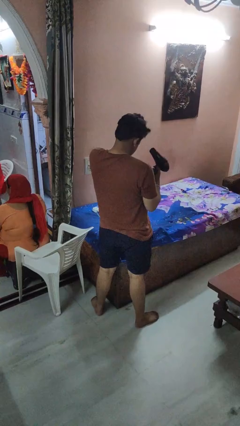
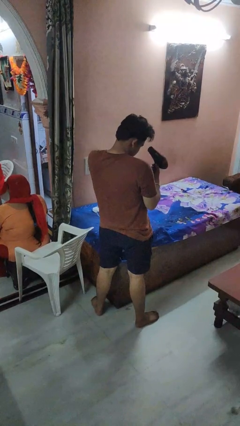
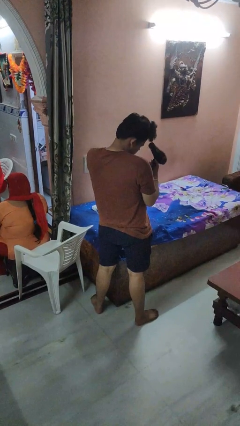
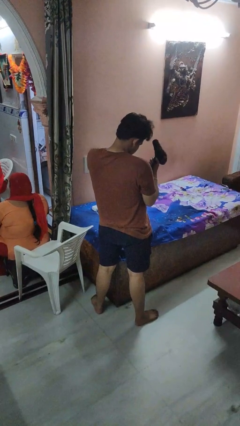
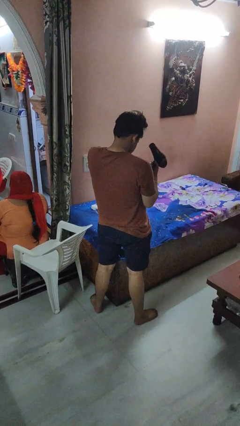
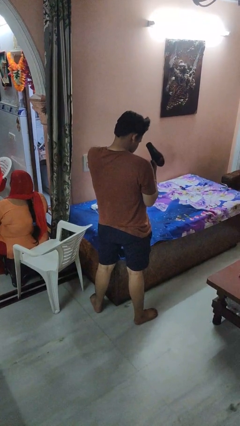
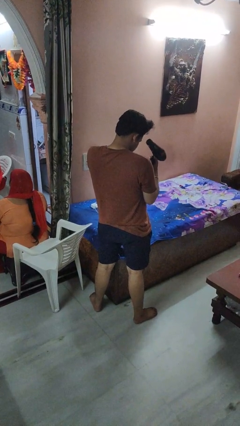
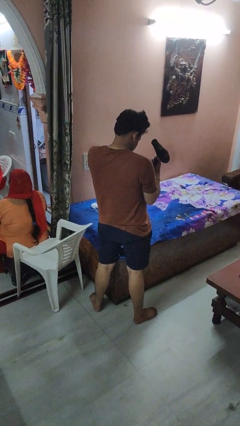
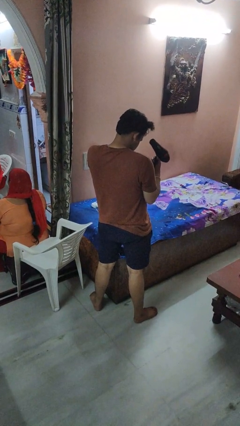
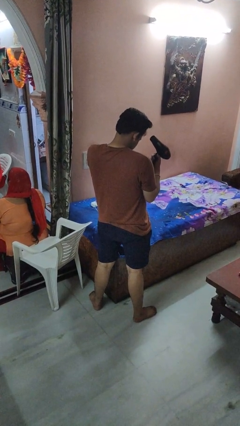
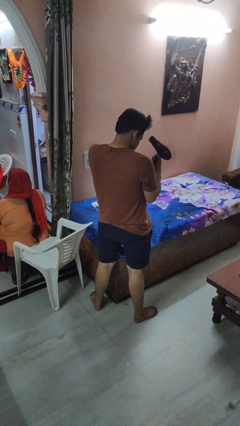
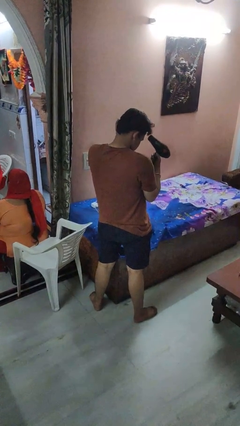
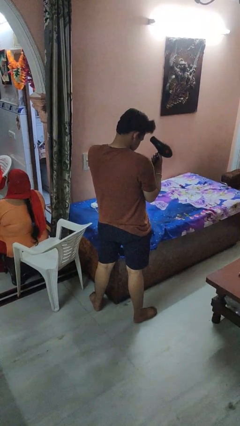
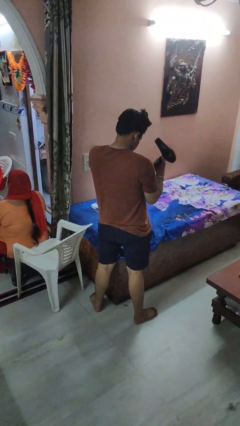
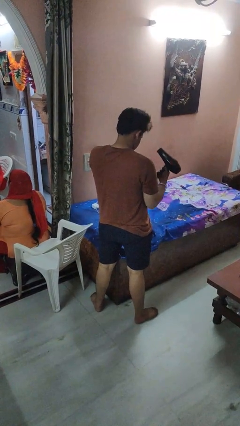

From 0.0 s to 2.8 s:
person dries hair with hairdryer

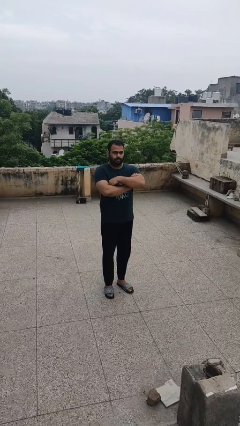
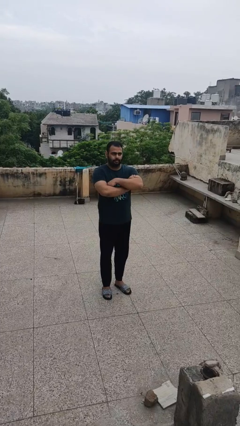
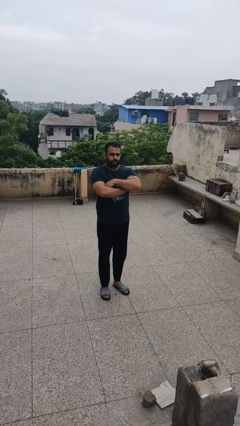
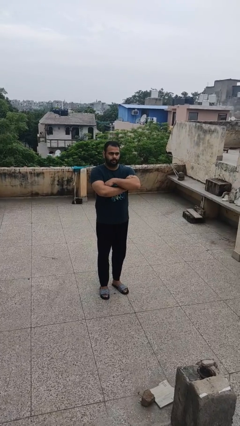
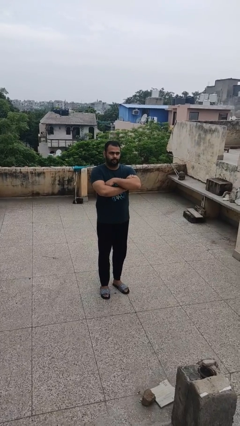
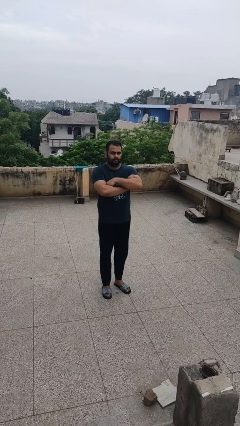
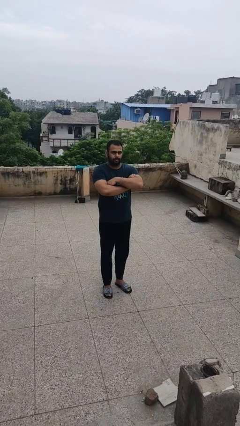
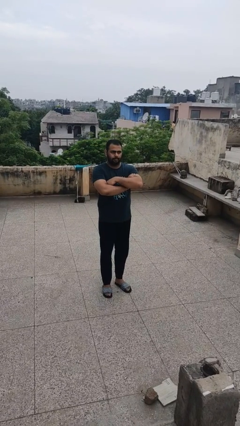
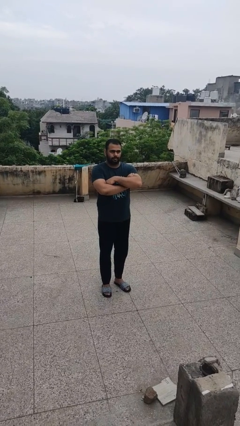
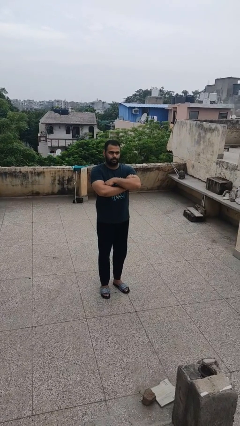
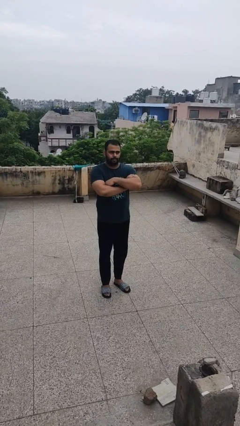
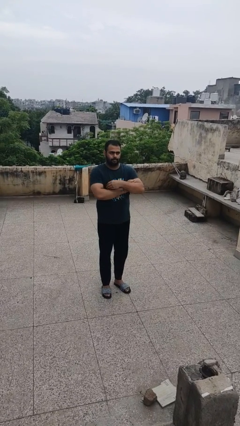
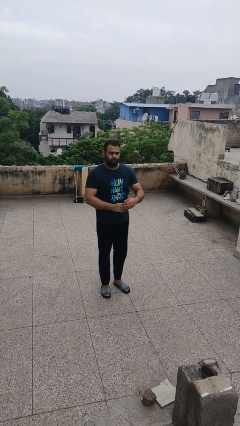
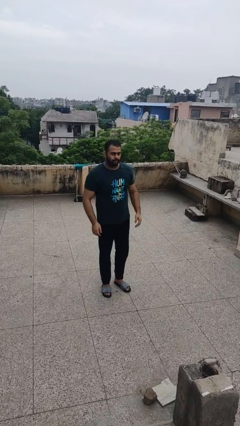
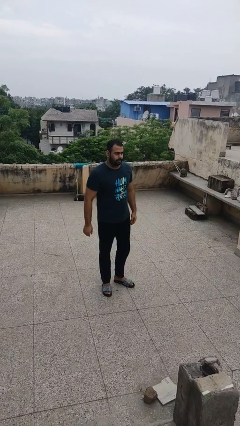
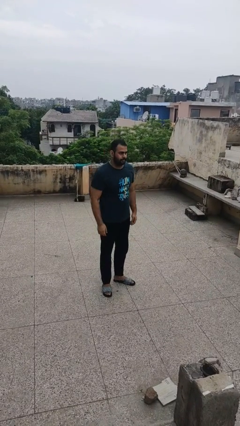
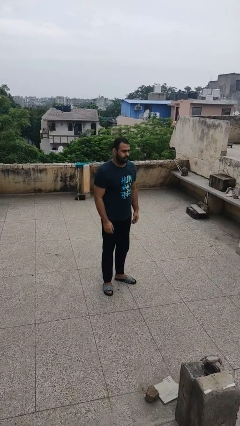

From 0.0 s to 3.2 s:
person crosses arms

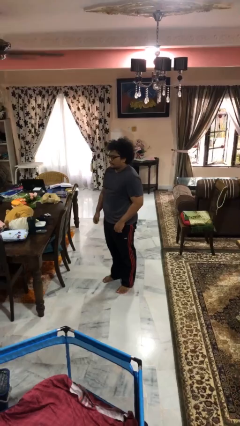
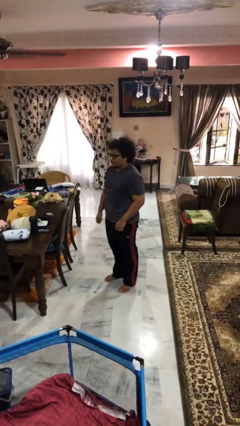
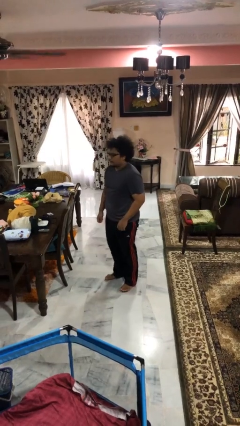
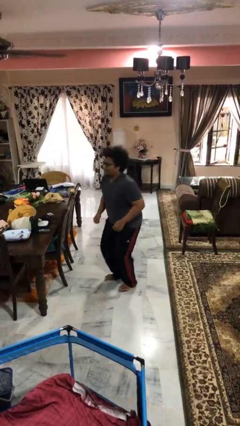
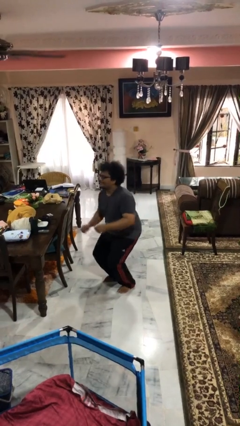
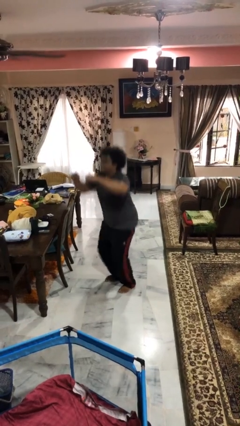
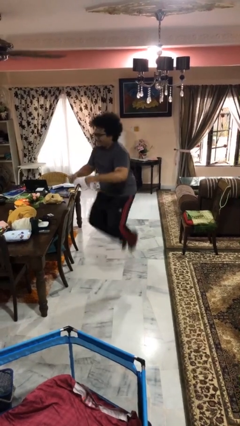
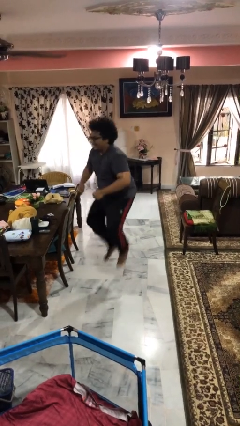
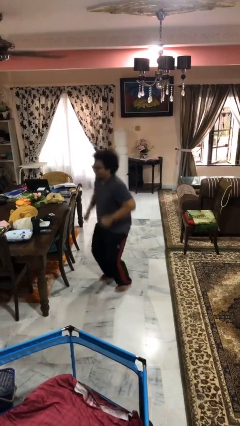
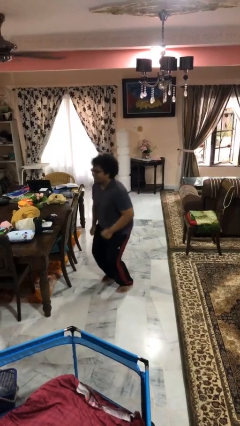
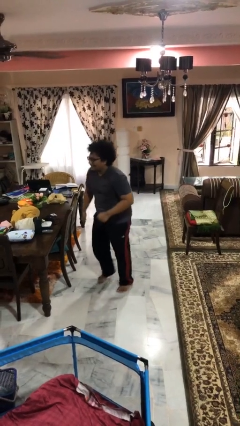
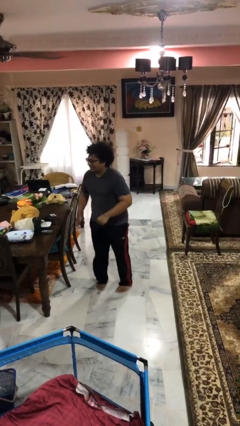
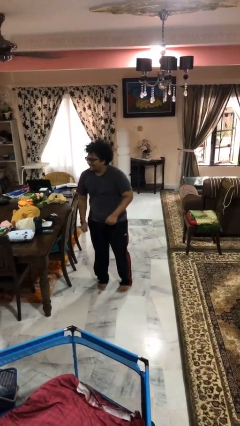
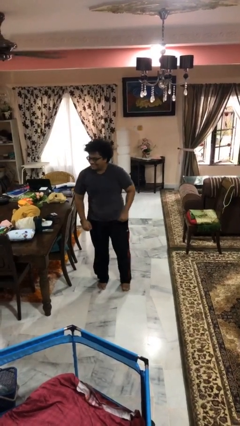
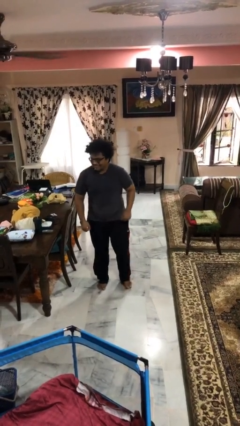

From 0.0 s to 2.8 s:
person jumps

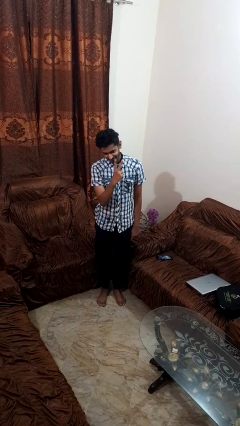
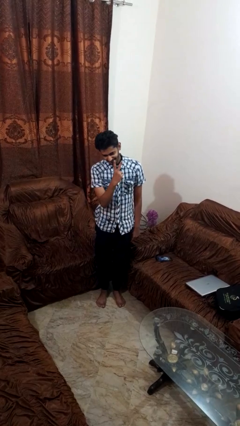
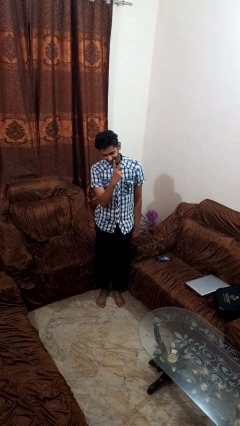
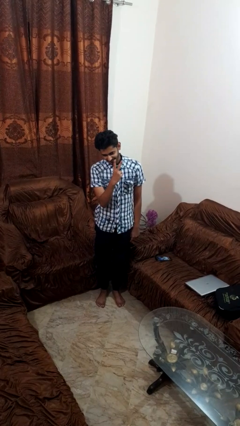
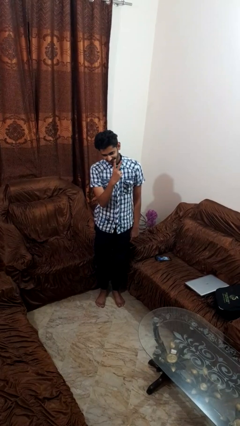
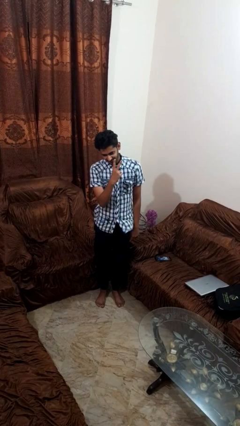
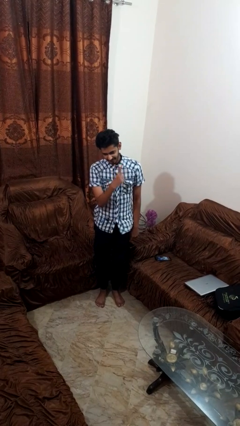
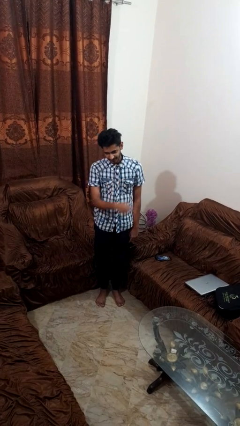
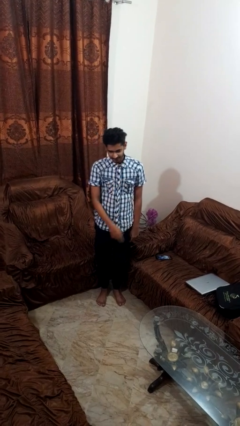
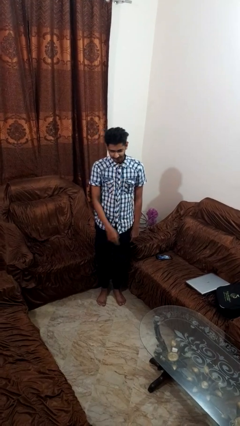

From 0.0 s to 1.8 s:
person gestures peace

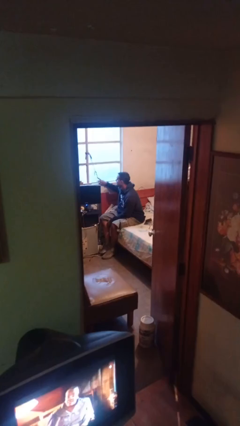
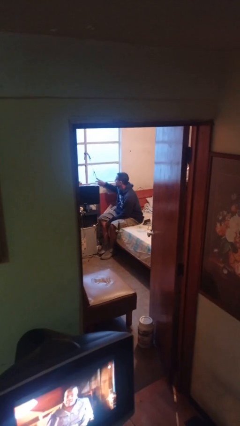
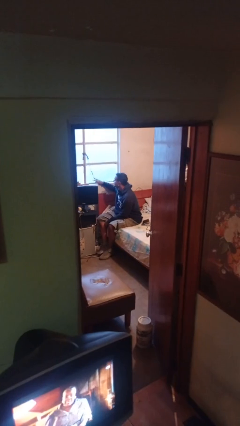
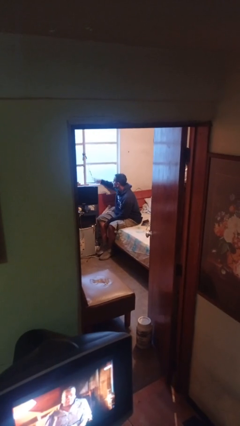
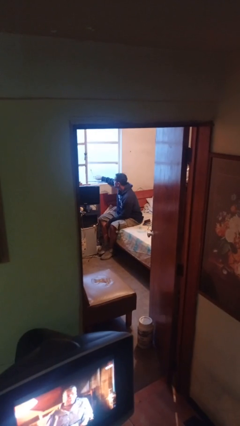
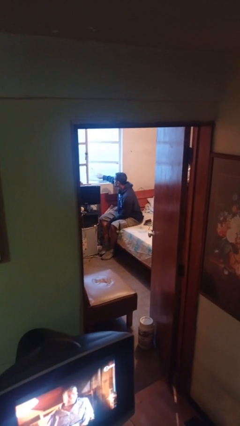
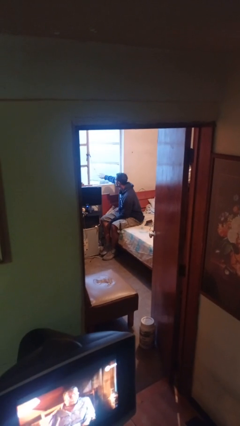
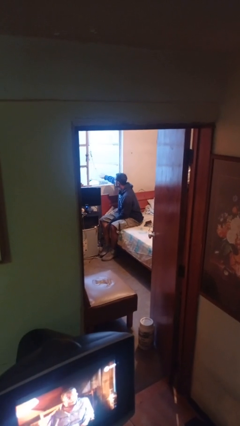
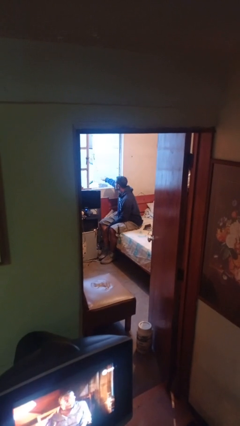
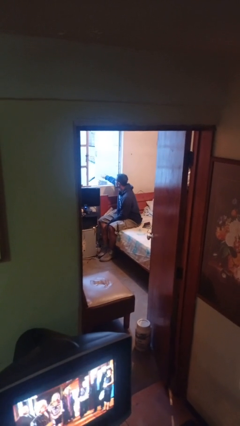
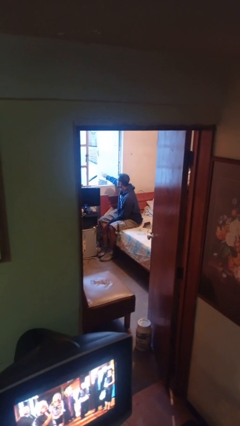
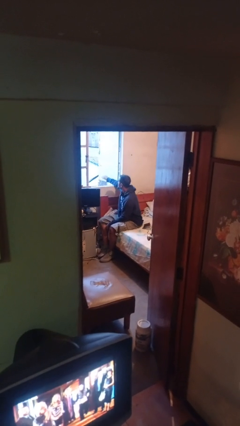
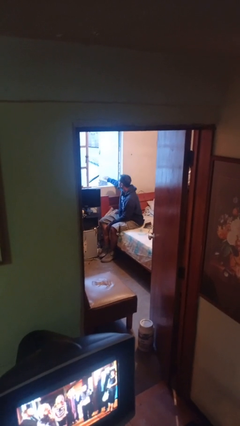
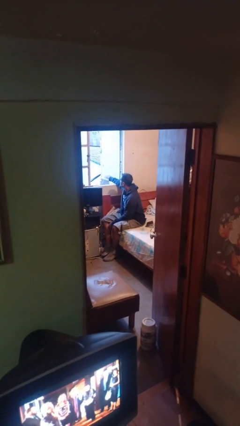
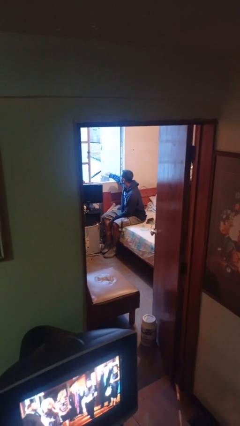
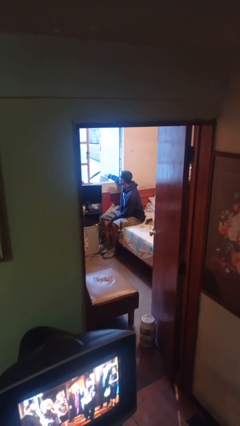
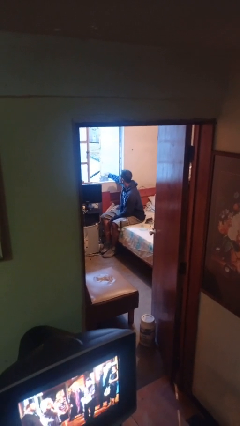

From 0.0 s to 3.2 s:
person opens home window

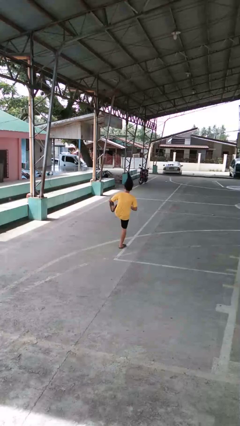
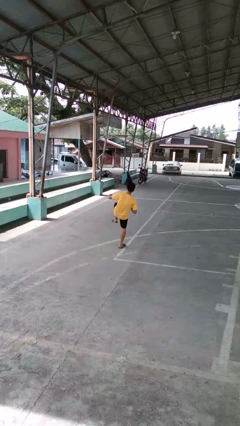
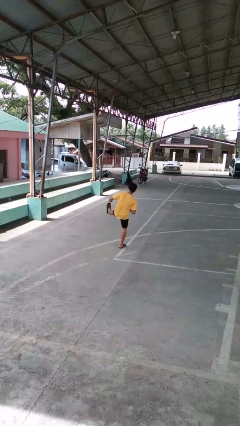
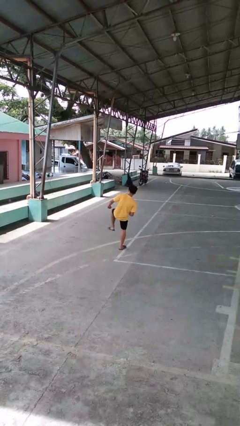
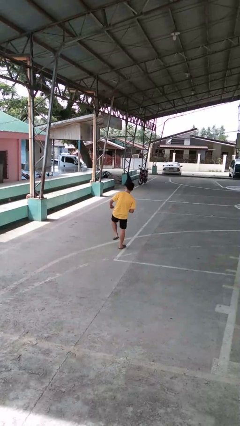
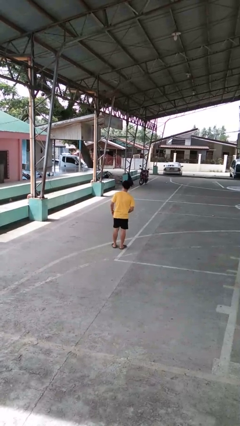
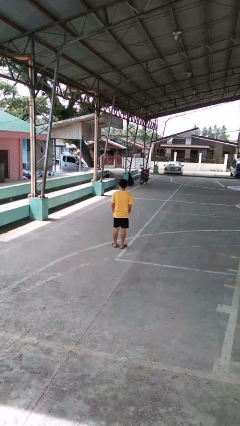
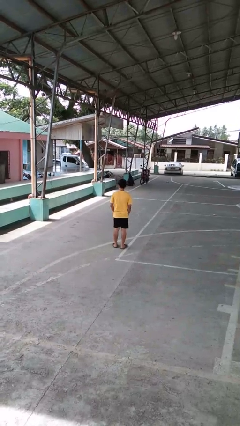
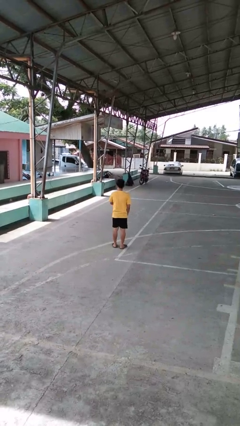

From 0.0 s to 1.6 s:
person karate kicks

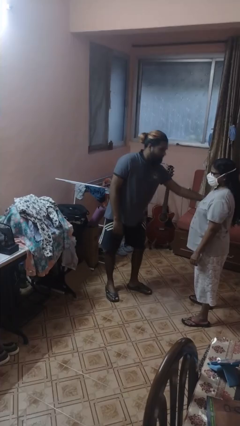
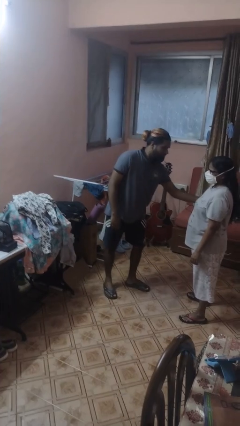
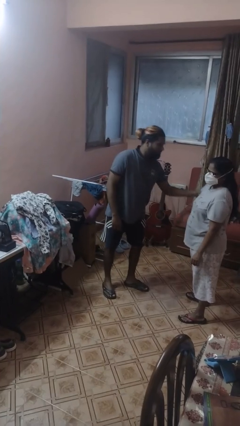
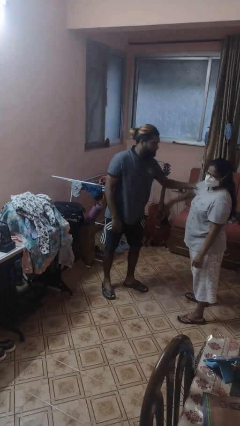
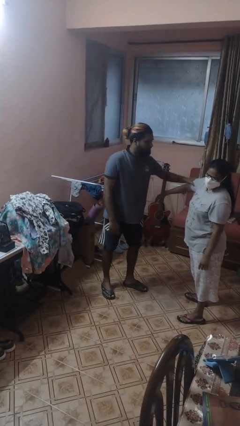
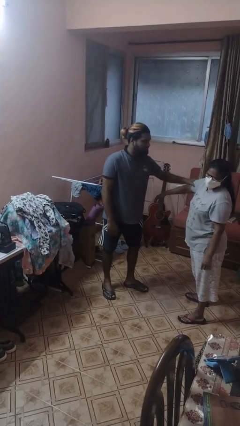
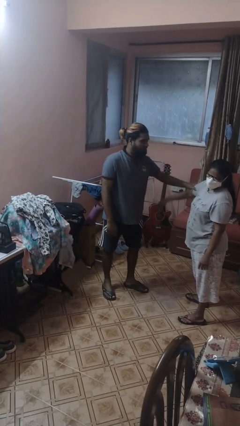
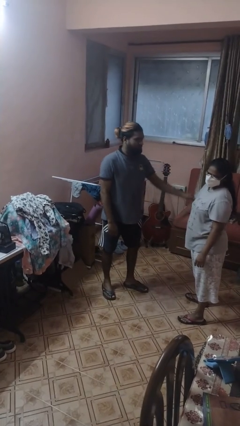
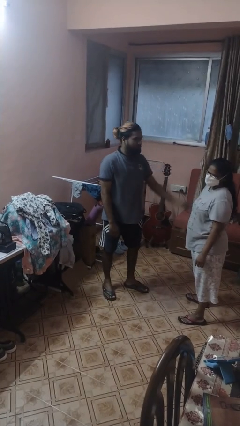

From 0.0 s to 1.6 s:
person grabs person by bicep
